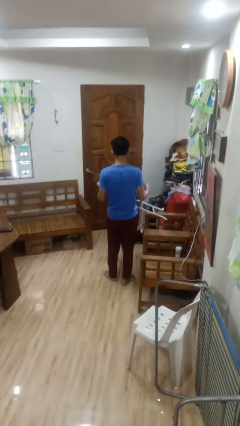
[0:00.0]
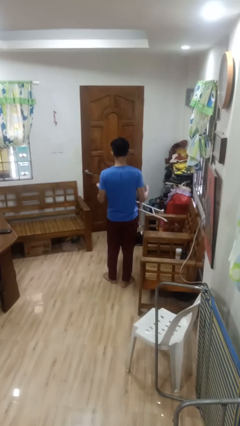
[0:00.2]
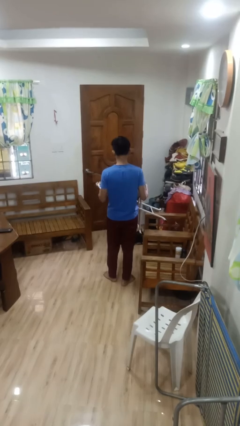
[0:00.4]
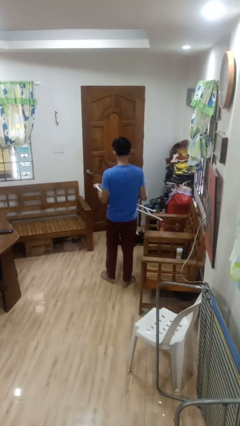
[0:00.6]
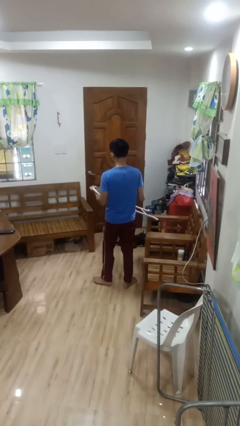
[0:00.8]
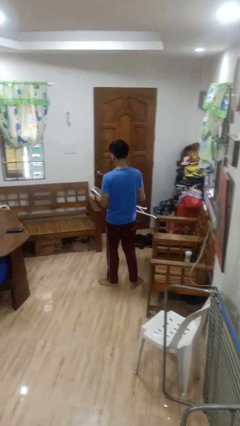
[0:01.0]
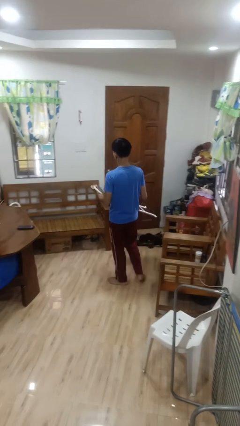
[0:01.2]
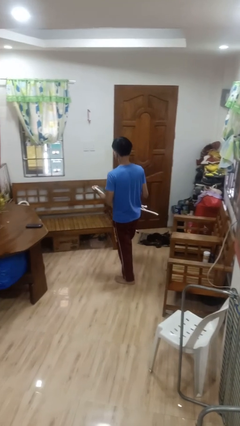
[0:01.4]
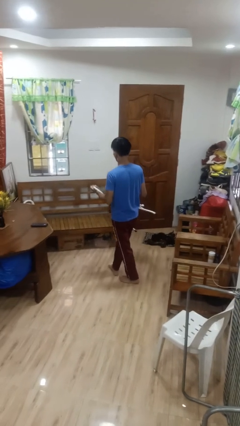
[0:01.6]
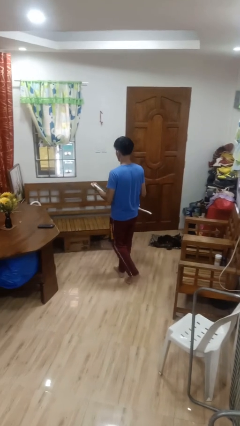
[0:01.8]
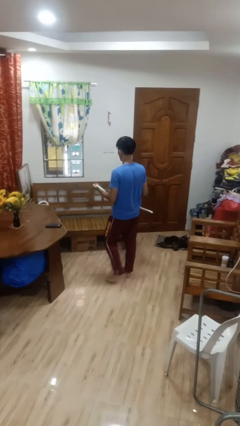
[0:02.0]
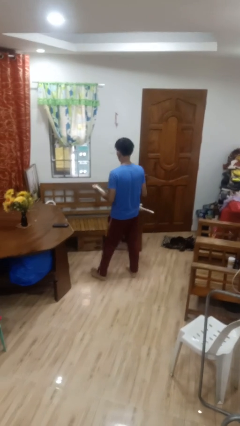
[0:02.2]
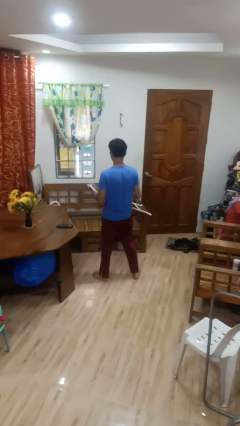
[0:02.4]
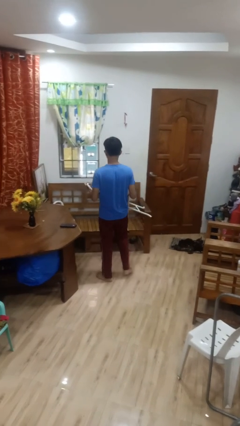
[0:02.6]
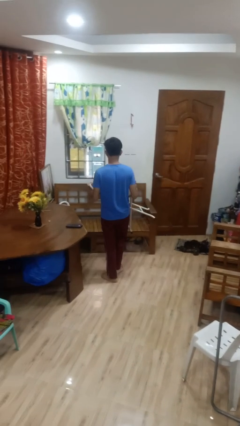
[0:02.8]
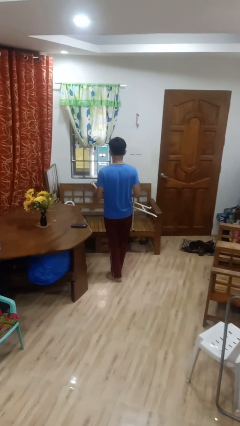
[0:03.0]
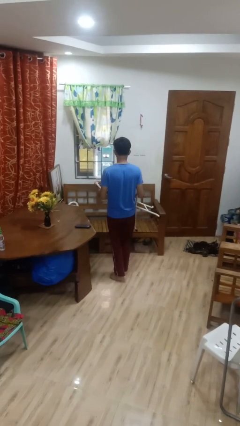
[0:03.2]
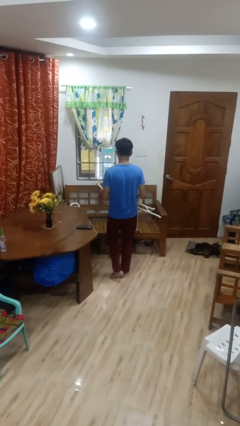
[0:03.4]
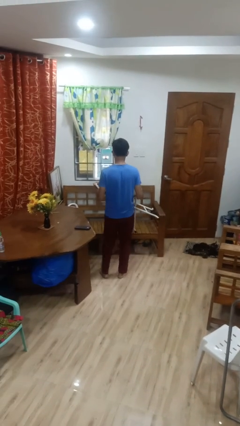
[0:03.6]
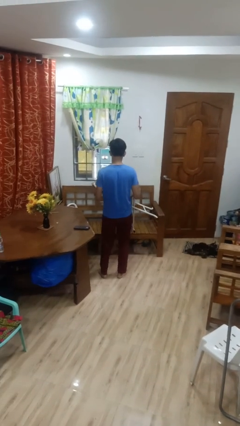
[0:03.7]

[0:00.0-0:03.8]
person carries furniture

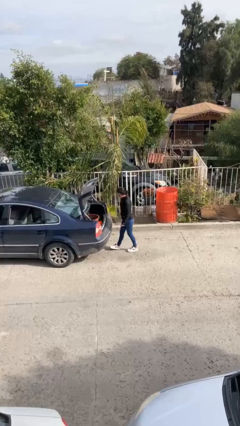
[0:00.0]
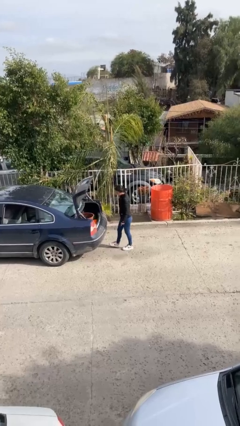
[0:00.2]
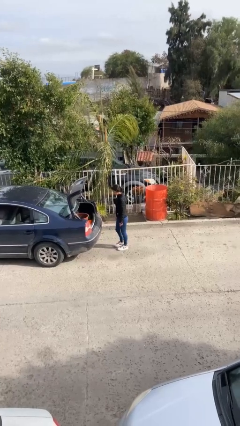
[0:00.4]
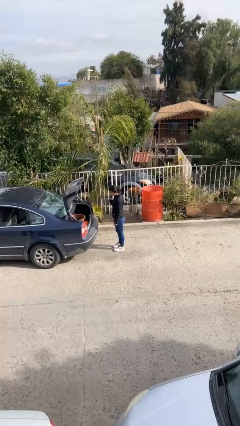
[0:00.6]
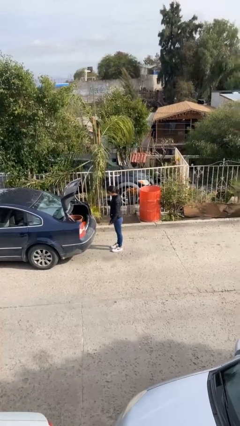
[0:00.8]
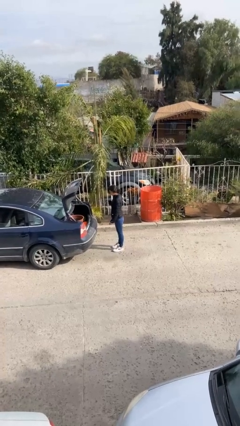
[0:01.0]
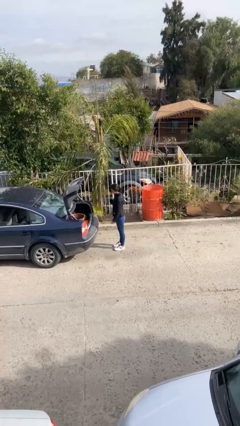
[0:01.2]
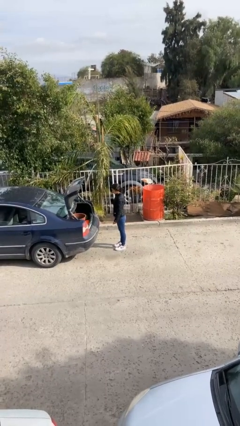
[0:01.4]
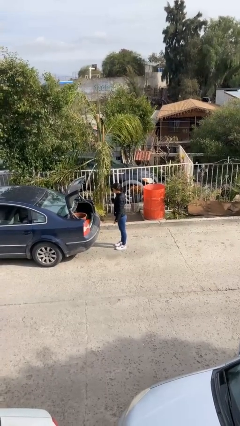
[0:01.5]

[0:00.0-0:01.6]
person loads car

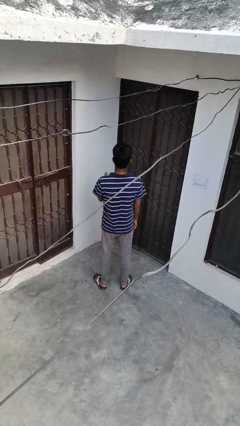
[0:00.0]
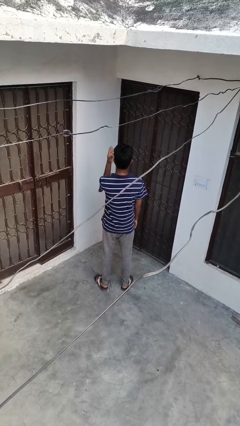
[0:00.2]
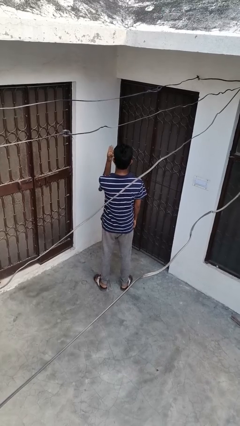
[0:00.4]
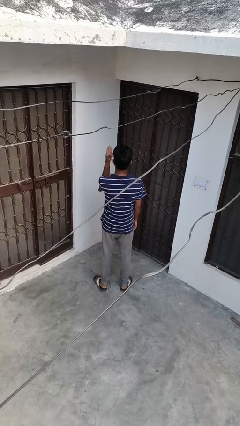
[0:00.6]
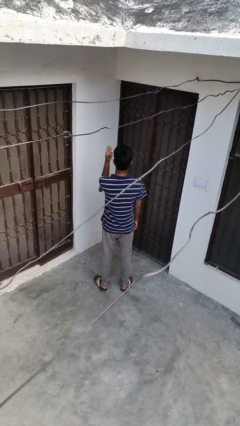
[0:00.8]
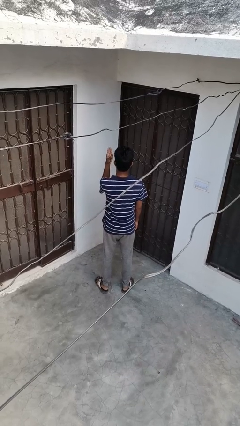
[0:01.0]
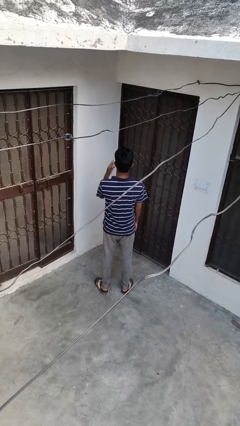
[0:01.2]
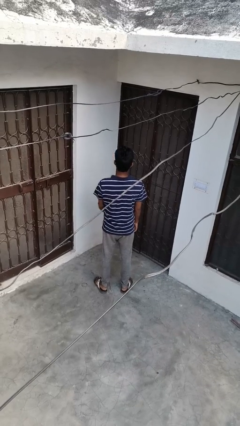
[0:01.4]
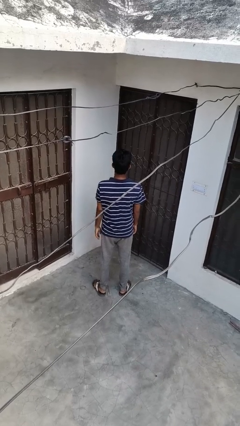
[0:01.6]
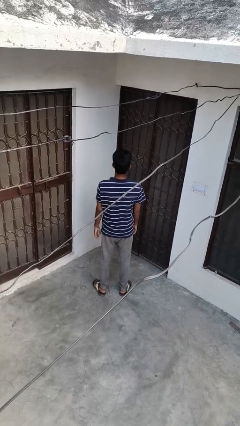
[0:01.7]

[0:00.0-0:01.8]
person gestures number four

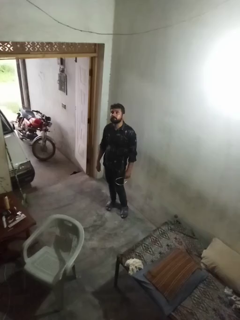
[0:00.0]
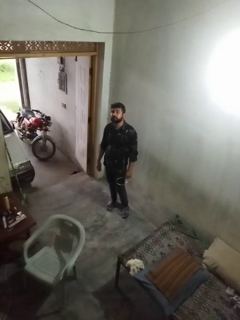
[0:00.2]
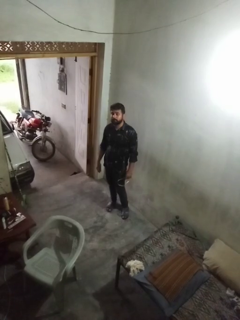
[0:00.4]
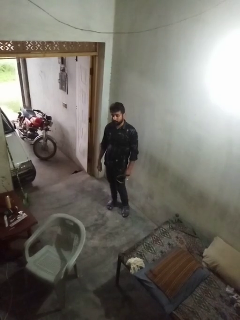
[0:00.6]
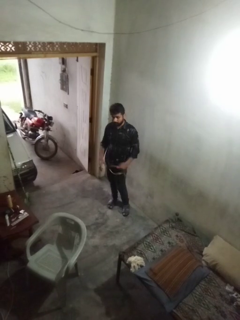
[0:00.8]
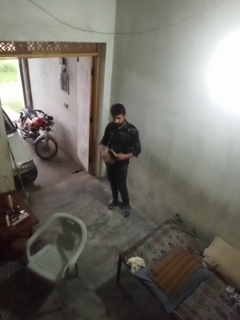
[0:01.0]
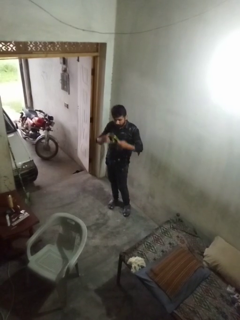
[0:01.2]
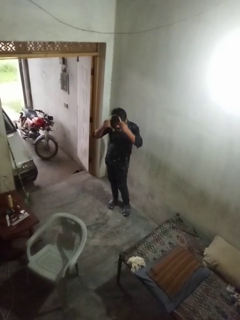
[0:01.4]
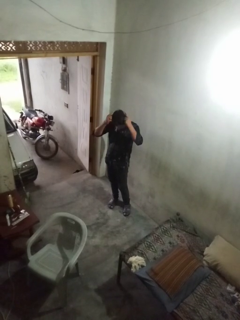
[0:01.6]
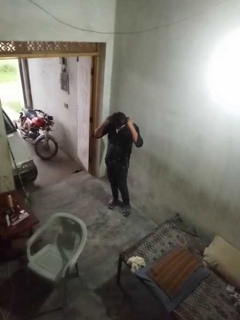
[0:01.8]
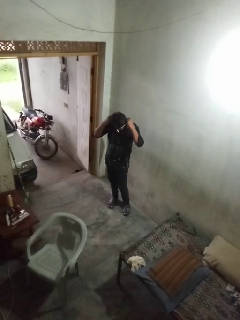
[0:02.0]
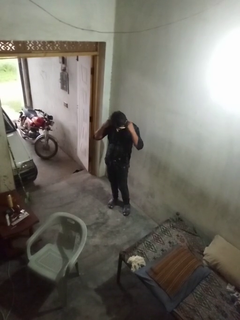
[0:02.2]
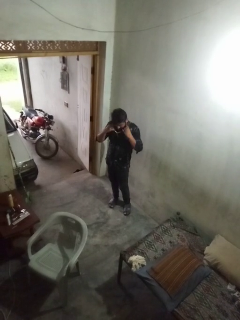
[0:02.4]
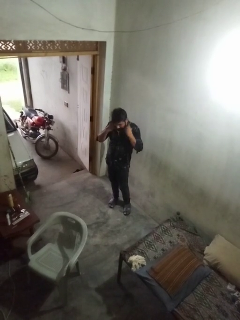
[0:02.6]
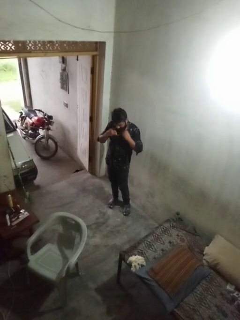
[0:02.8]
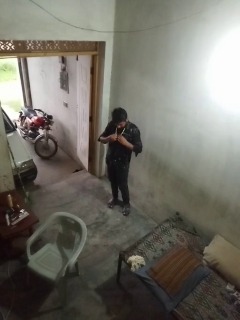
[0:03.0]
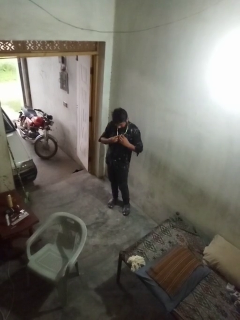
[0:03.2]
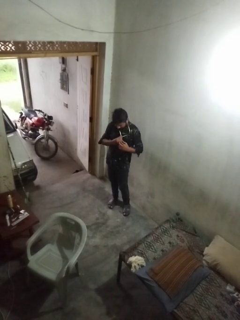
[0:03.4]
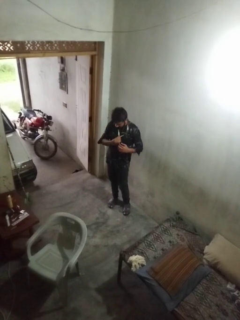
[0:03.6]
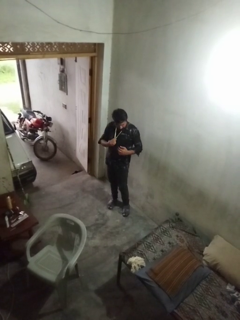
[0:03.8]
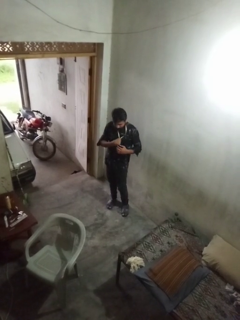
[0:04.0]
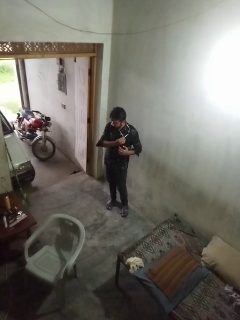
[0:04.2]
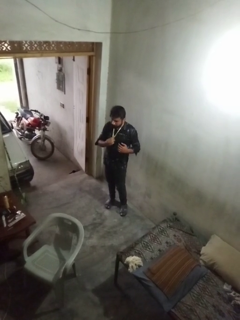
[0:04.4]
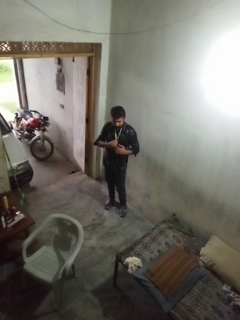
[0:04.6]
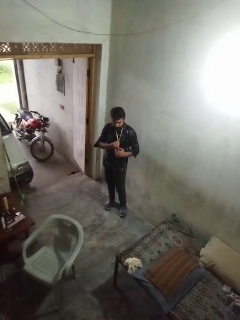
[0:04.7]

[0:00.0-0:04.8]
person puts on necklace

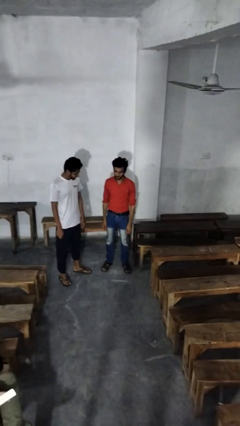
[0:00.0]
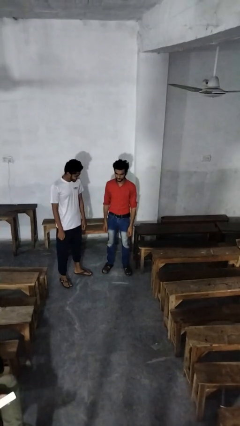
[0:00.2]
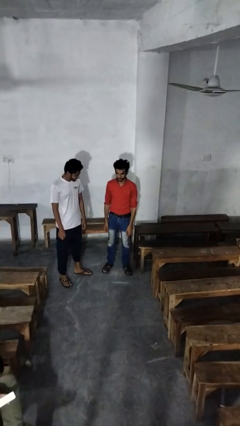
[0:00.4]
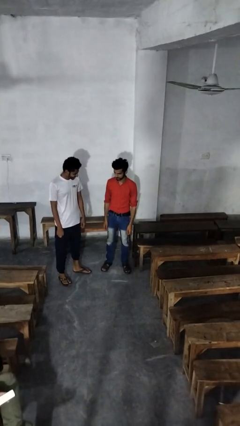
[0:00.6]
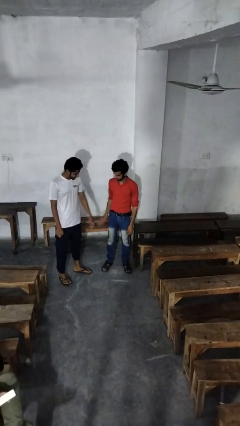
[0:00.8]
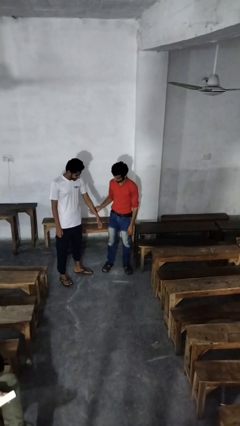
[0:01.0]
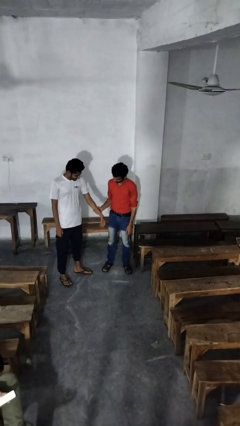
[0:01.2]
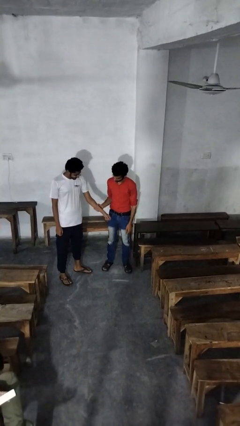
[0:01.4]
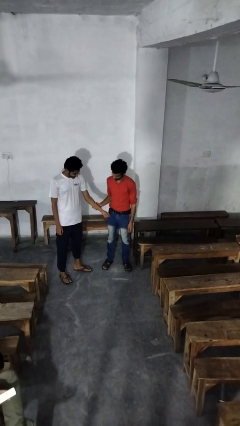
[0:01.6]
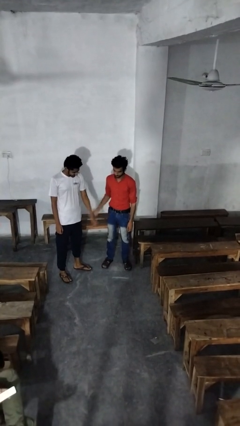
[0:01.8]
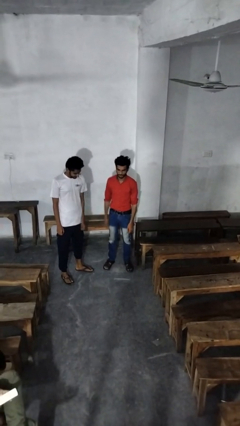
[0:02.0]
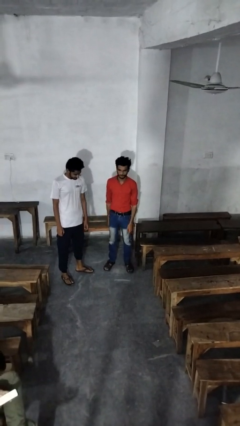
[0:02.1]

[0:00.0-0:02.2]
person grabs person by forearm

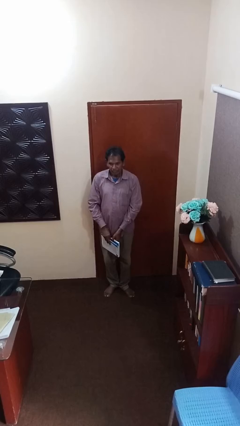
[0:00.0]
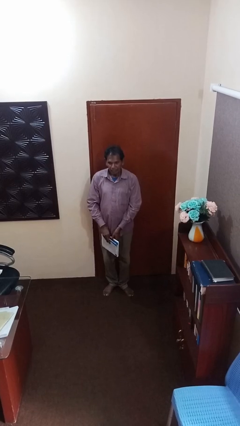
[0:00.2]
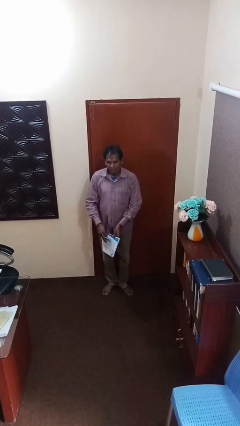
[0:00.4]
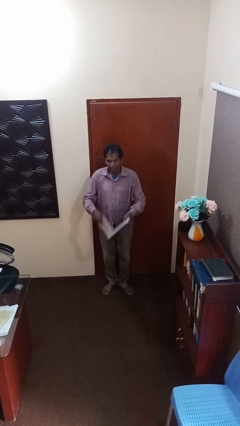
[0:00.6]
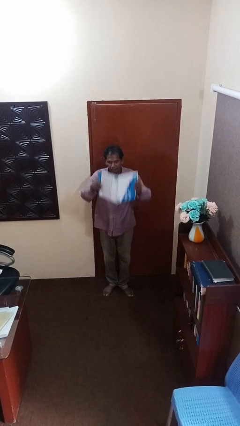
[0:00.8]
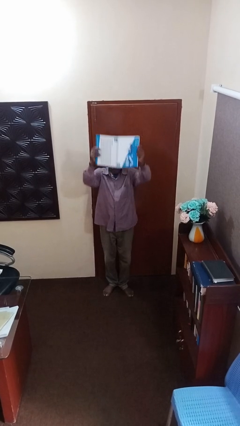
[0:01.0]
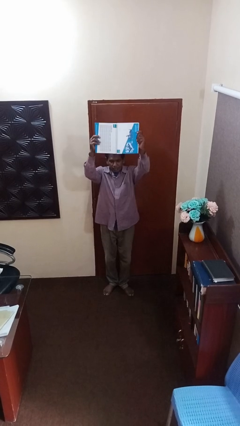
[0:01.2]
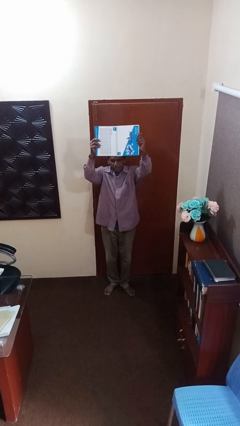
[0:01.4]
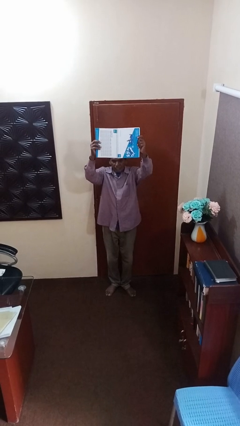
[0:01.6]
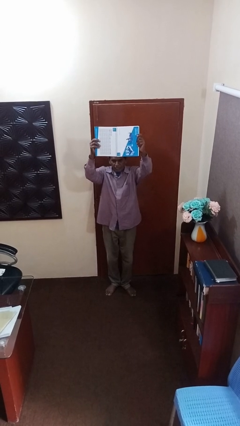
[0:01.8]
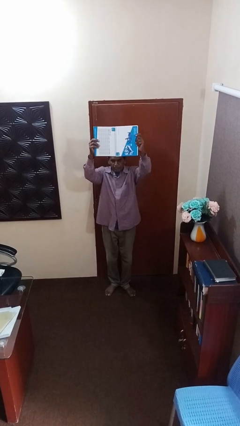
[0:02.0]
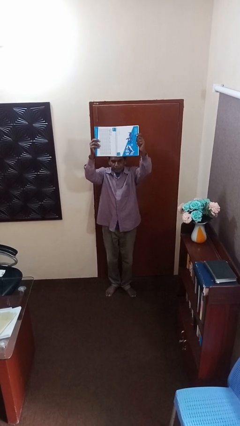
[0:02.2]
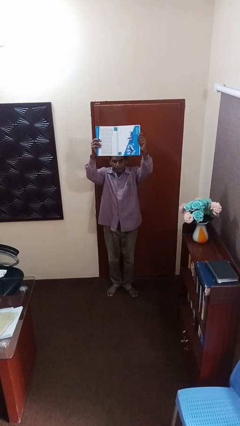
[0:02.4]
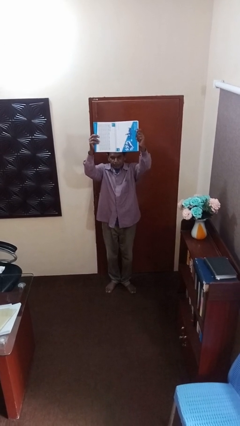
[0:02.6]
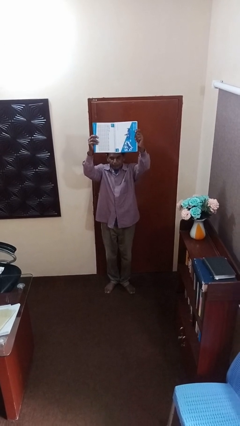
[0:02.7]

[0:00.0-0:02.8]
person holds object above head

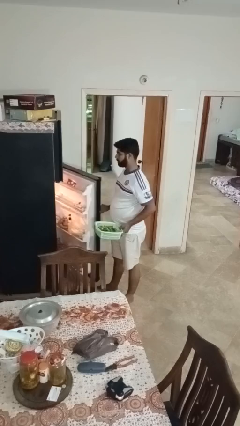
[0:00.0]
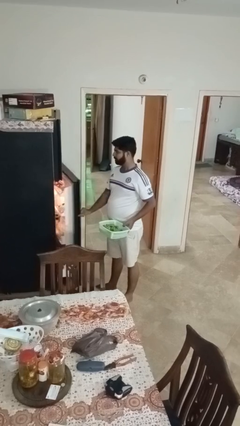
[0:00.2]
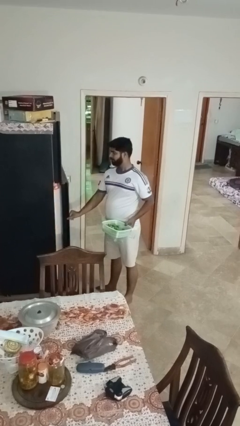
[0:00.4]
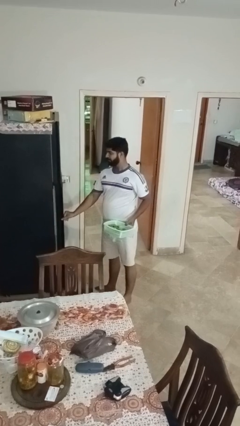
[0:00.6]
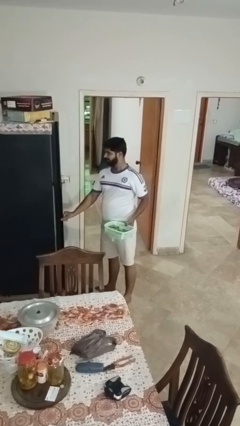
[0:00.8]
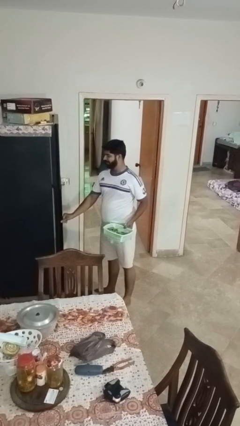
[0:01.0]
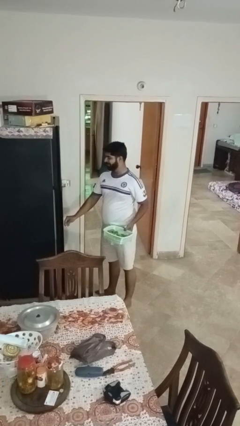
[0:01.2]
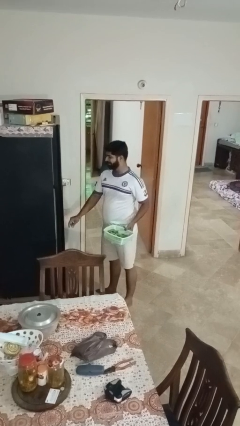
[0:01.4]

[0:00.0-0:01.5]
person takes object from refrigerator
